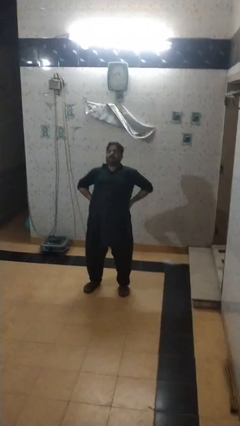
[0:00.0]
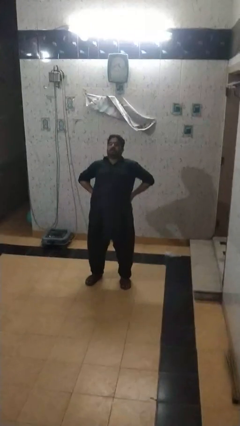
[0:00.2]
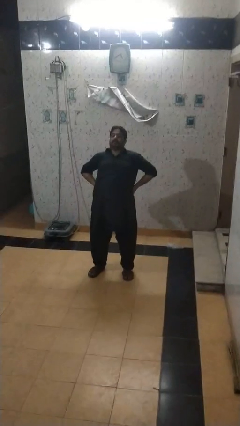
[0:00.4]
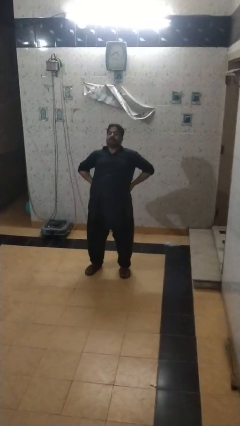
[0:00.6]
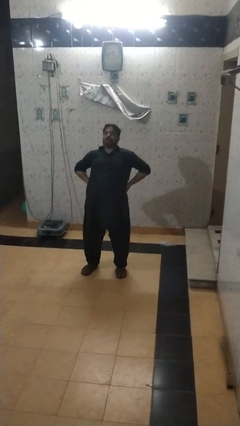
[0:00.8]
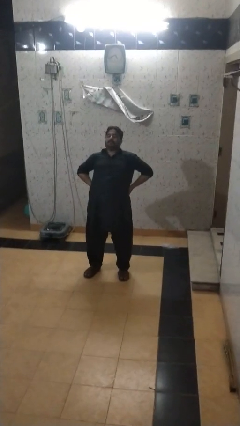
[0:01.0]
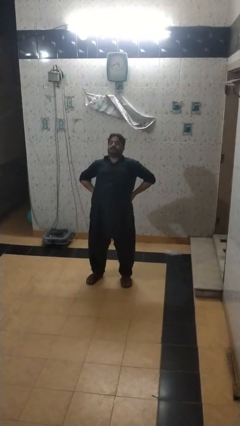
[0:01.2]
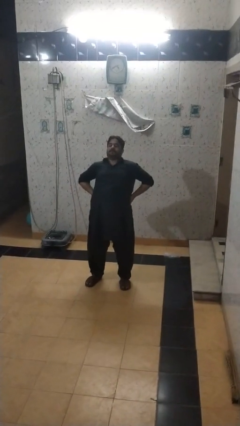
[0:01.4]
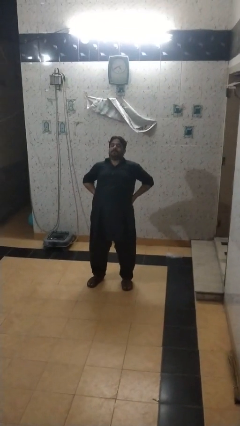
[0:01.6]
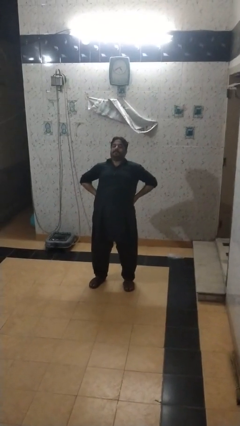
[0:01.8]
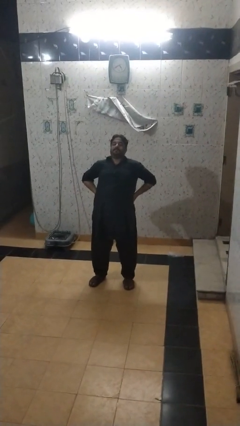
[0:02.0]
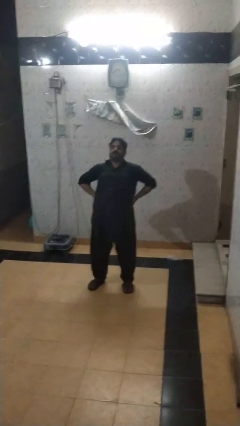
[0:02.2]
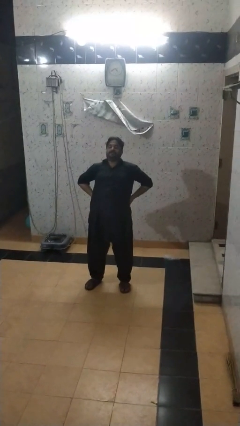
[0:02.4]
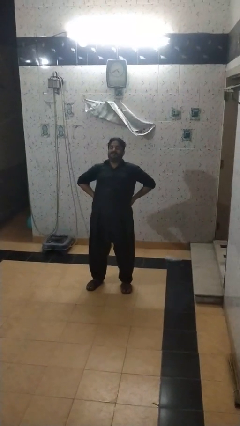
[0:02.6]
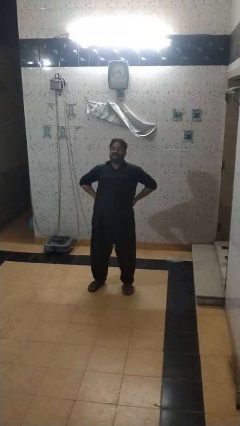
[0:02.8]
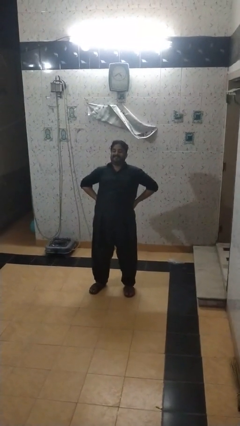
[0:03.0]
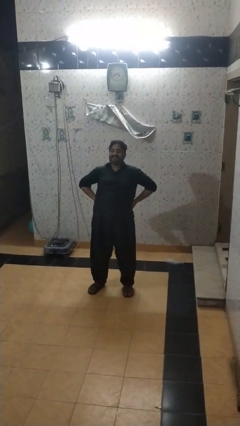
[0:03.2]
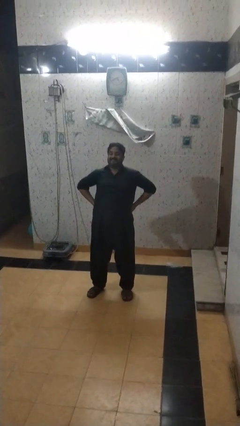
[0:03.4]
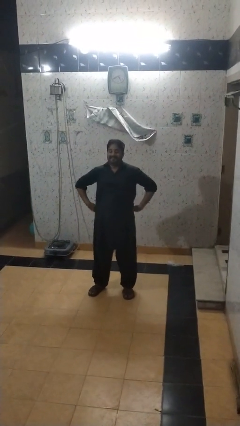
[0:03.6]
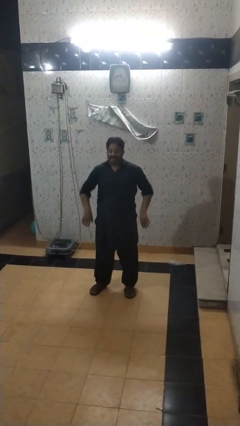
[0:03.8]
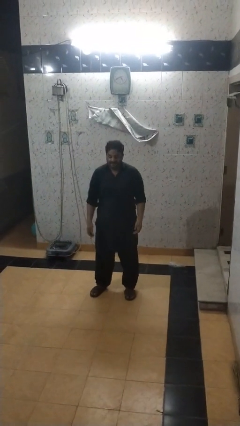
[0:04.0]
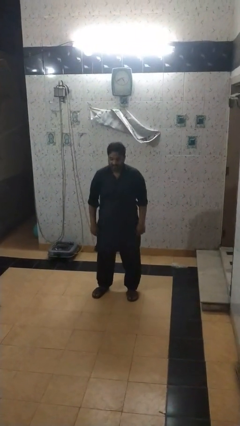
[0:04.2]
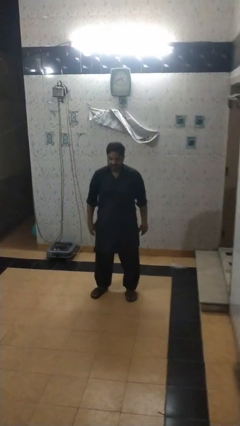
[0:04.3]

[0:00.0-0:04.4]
person stretches back

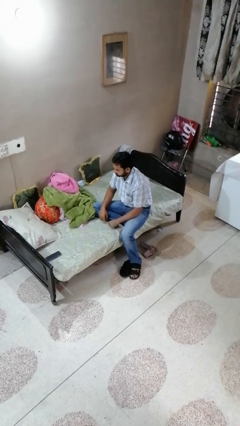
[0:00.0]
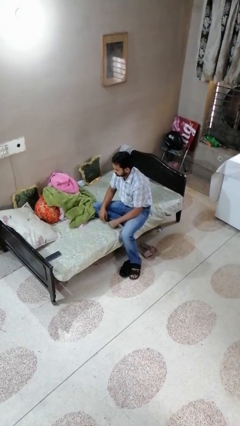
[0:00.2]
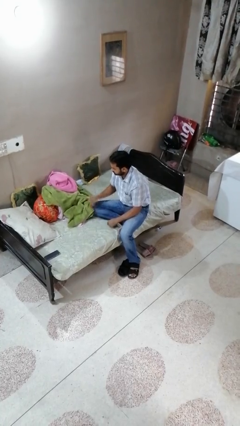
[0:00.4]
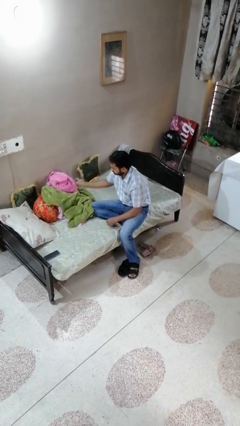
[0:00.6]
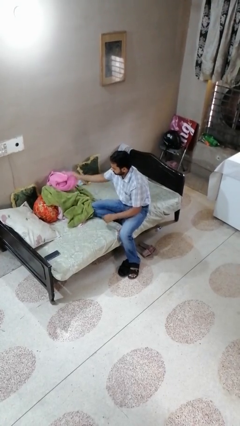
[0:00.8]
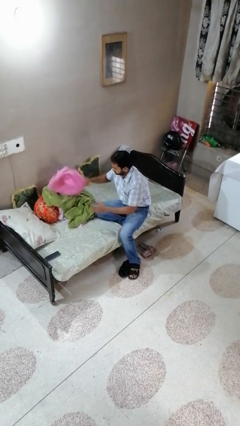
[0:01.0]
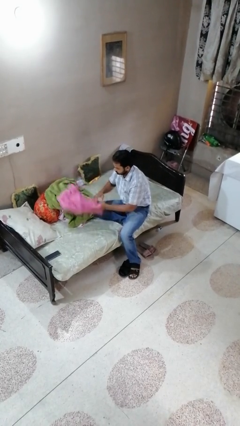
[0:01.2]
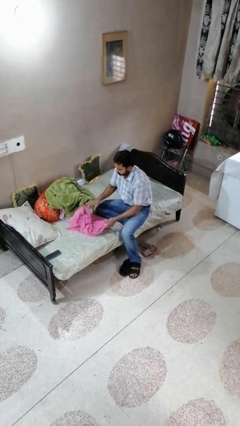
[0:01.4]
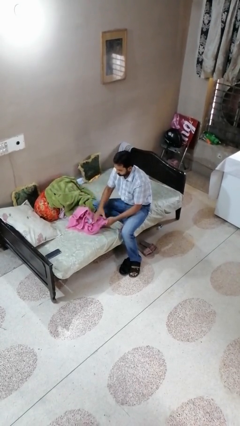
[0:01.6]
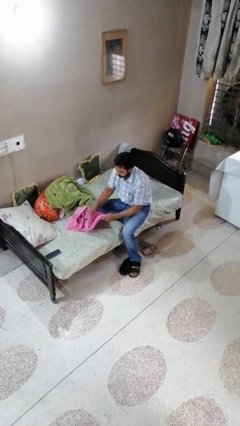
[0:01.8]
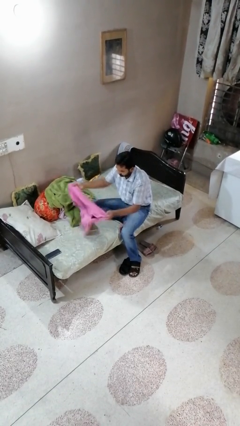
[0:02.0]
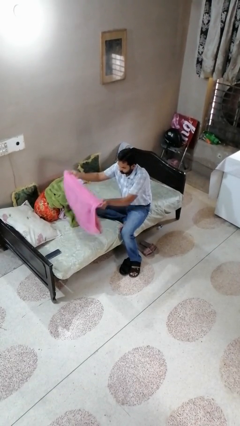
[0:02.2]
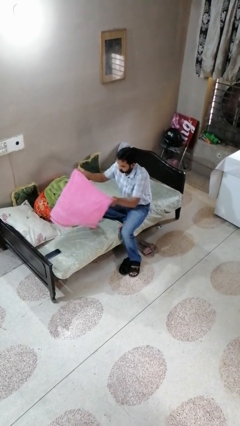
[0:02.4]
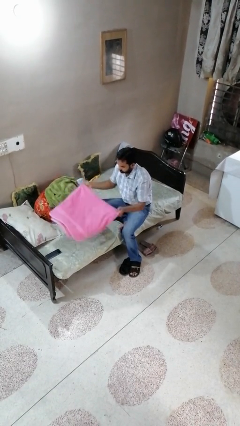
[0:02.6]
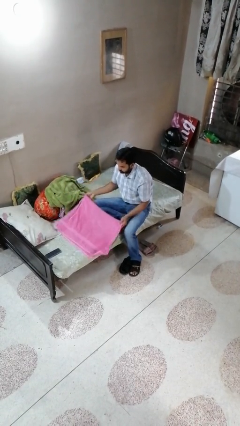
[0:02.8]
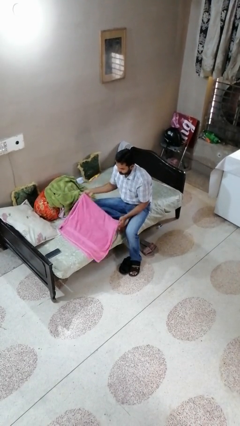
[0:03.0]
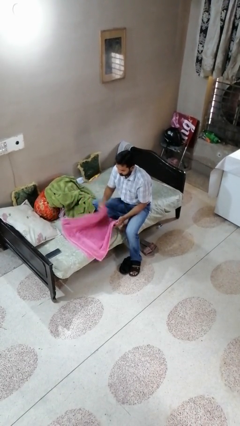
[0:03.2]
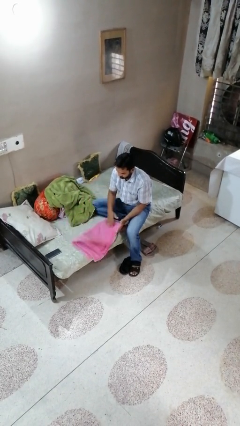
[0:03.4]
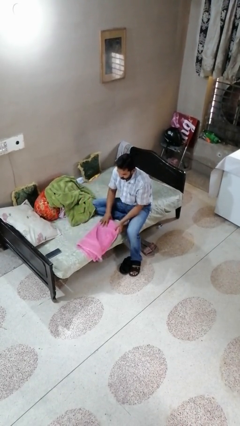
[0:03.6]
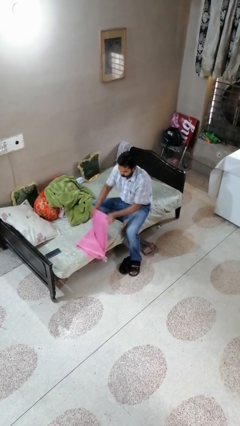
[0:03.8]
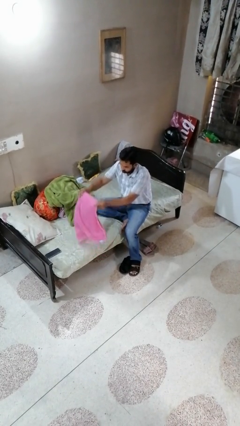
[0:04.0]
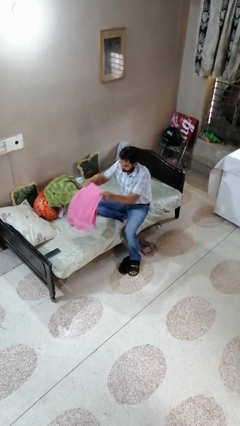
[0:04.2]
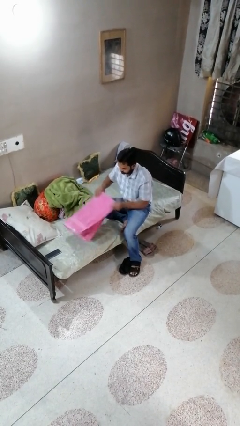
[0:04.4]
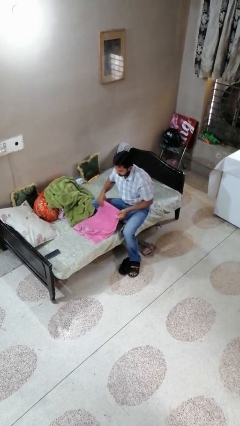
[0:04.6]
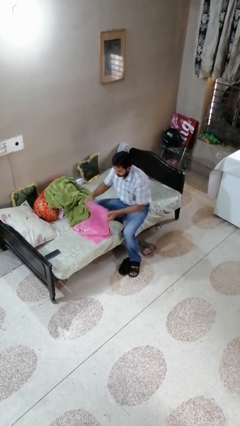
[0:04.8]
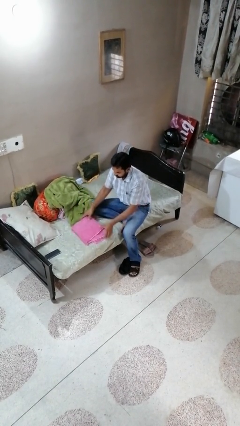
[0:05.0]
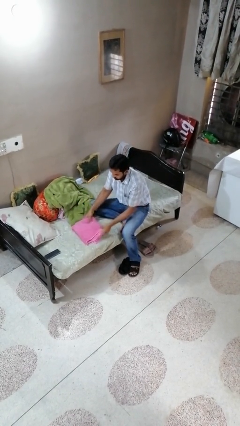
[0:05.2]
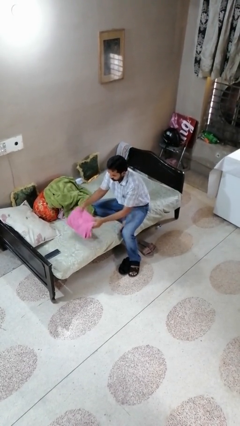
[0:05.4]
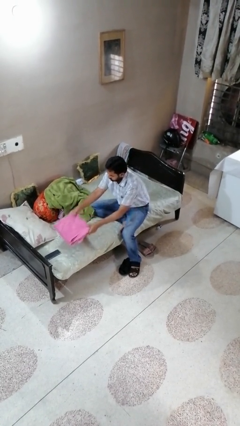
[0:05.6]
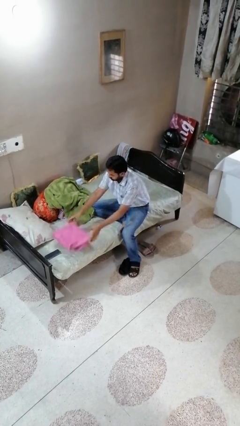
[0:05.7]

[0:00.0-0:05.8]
person folds towel

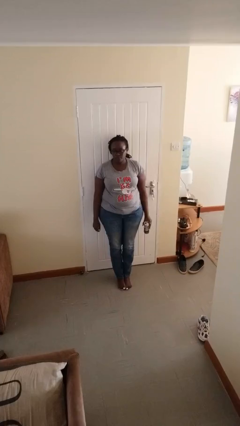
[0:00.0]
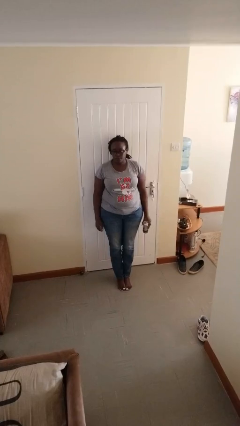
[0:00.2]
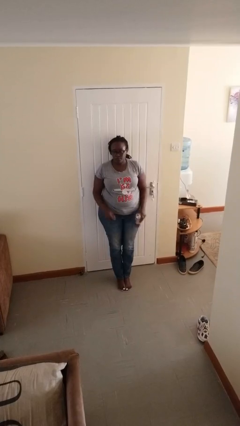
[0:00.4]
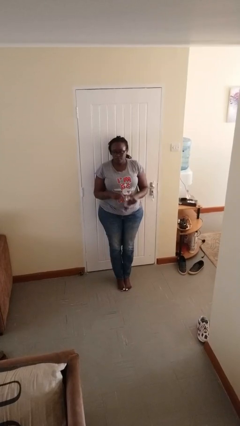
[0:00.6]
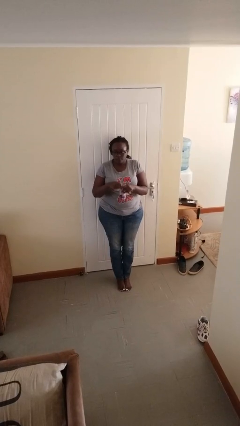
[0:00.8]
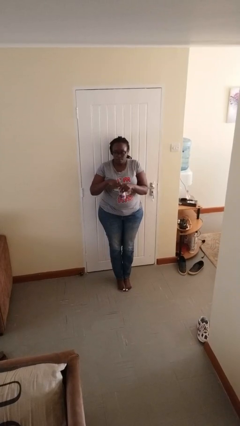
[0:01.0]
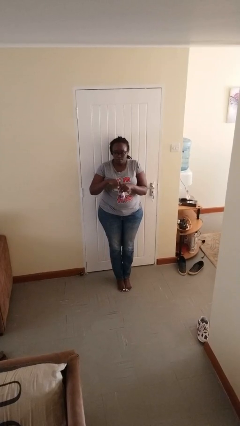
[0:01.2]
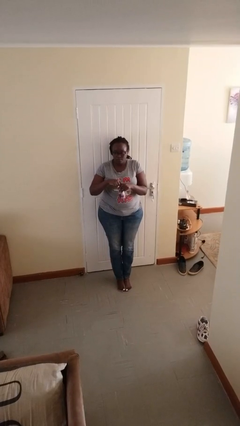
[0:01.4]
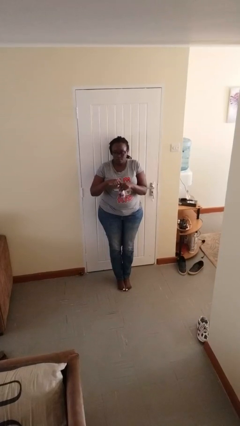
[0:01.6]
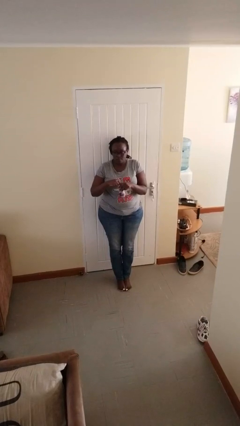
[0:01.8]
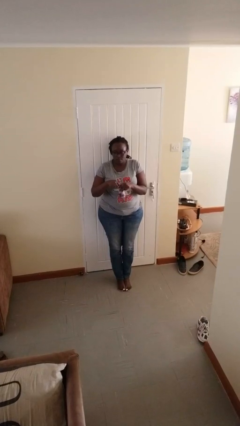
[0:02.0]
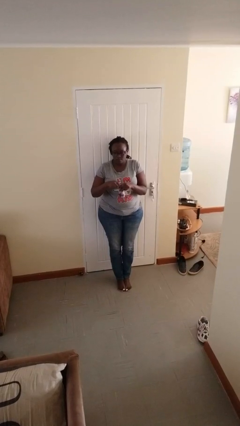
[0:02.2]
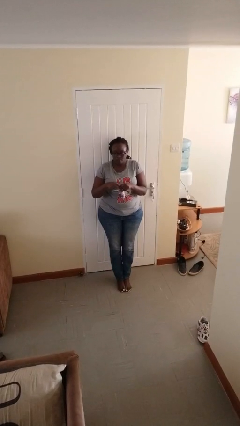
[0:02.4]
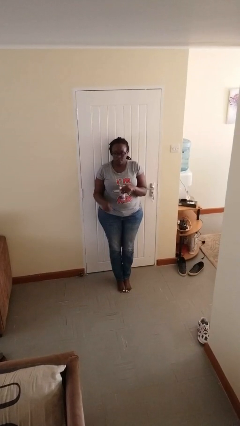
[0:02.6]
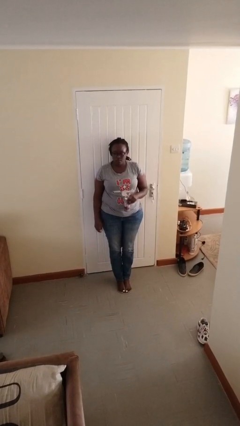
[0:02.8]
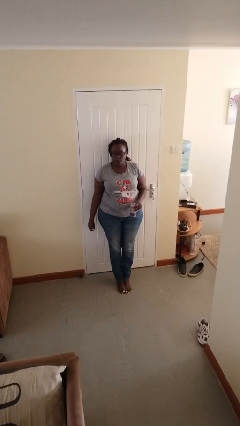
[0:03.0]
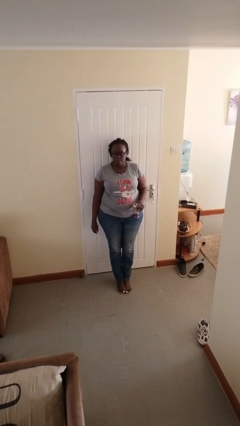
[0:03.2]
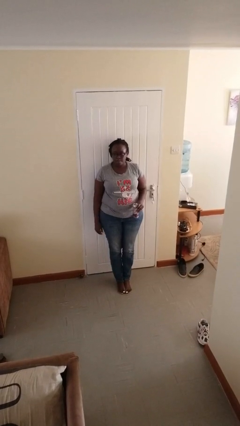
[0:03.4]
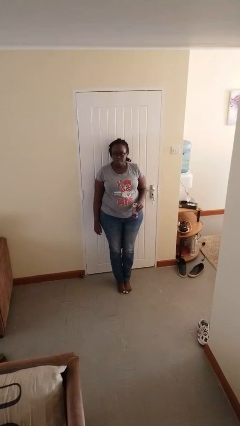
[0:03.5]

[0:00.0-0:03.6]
person opens beverage can

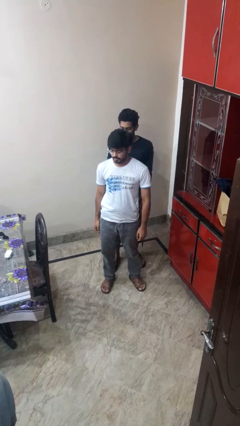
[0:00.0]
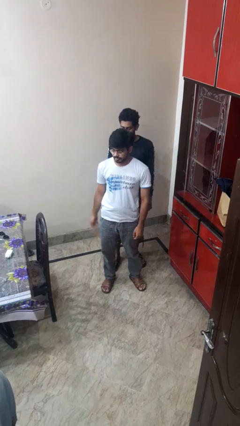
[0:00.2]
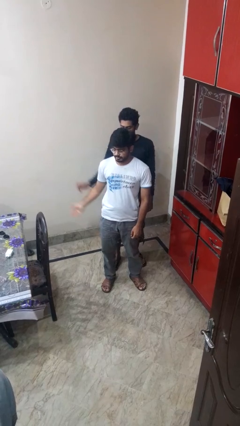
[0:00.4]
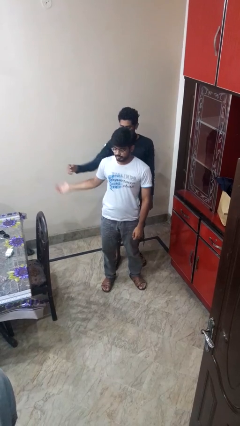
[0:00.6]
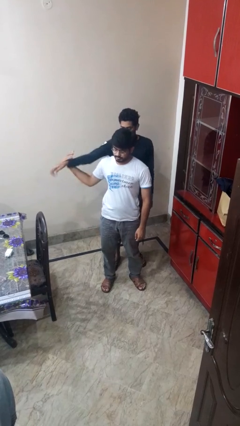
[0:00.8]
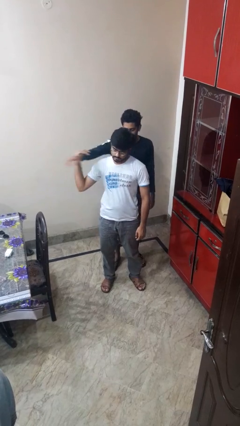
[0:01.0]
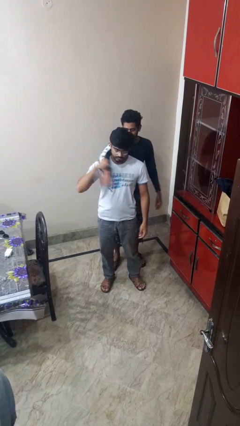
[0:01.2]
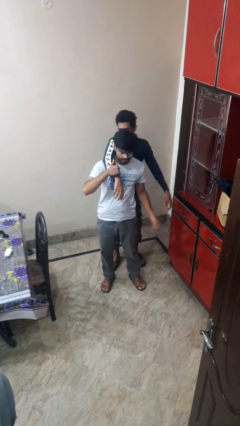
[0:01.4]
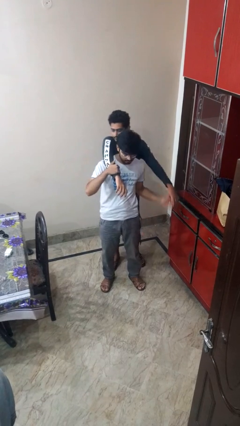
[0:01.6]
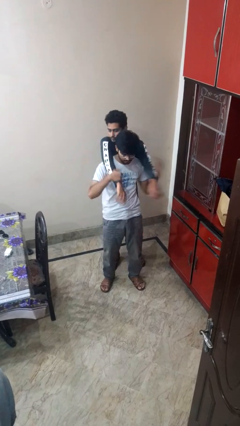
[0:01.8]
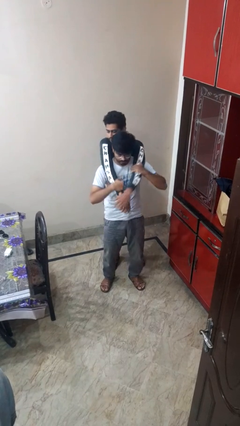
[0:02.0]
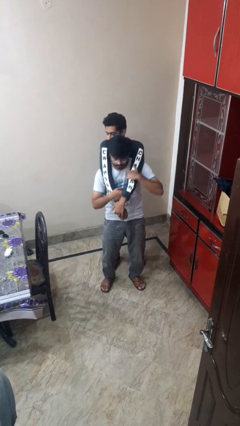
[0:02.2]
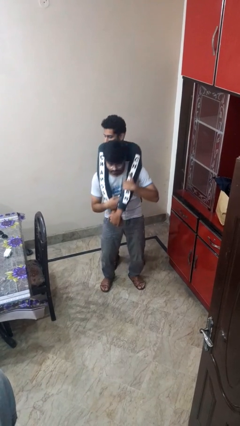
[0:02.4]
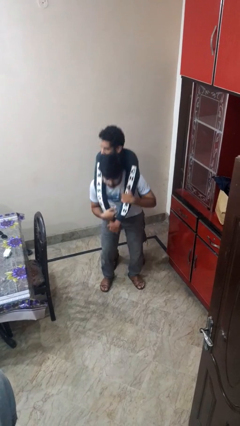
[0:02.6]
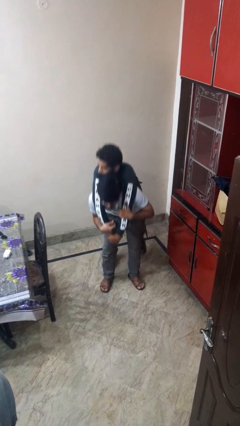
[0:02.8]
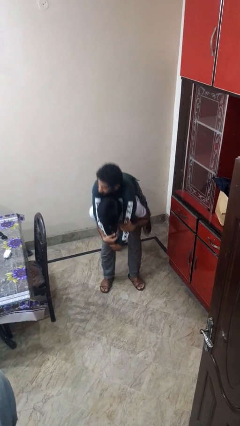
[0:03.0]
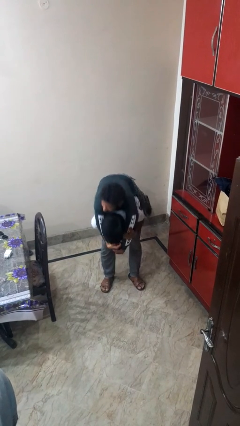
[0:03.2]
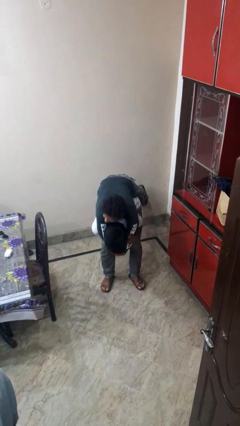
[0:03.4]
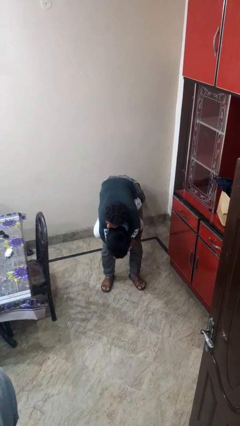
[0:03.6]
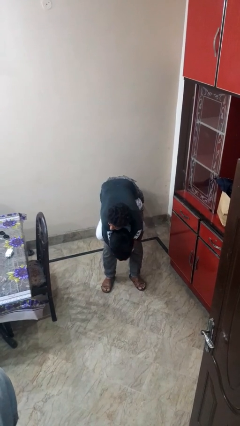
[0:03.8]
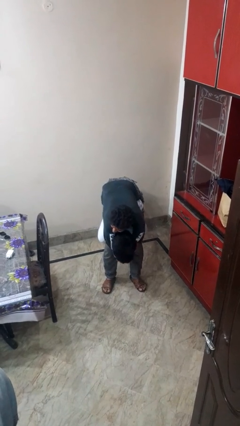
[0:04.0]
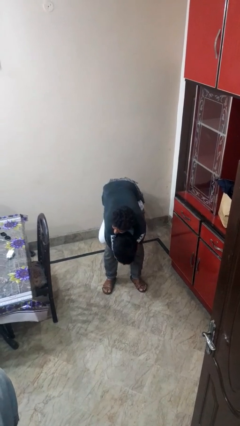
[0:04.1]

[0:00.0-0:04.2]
person carries person over shoulder
